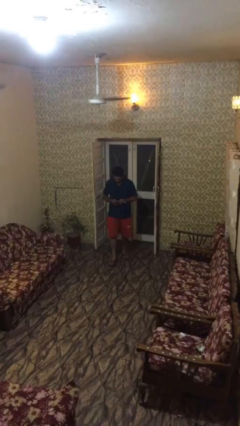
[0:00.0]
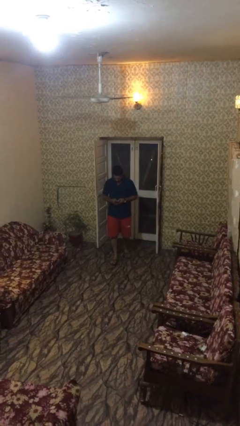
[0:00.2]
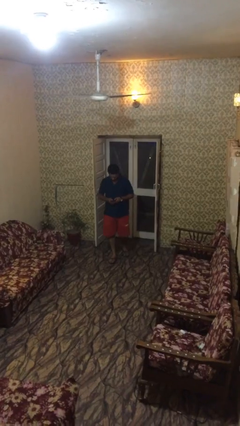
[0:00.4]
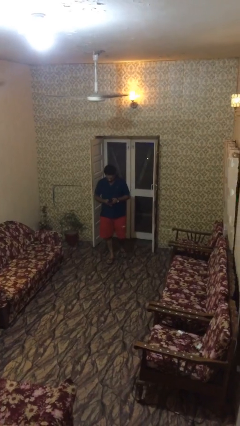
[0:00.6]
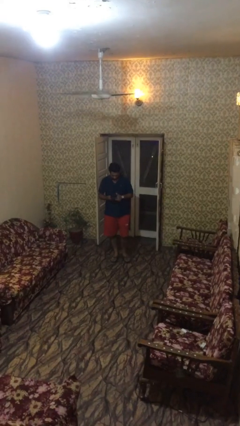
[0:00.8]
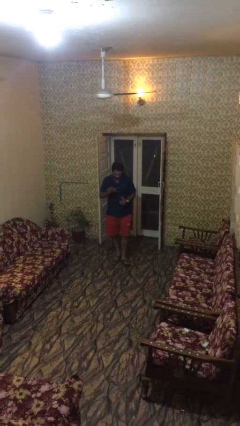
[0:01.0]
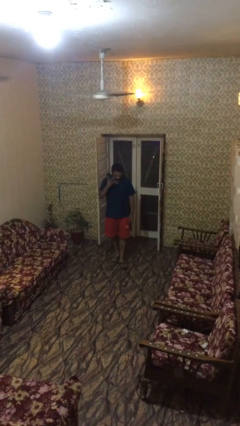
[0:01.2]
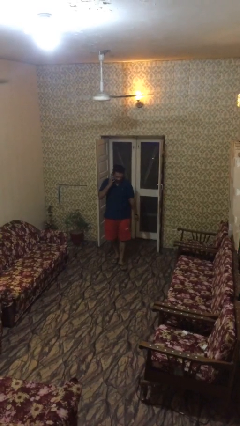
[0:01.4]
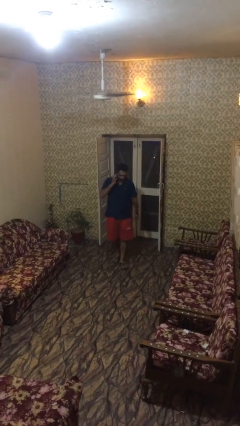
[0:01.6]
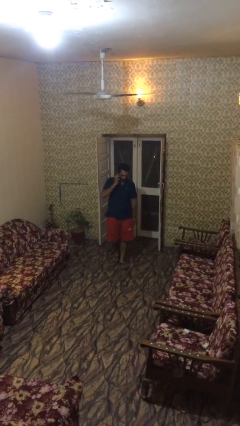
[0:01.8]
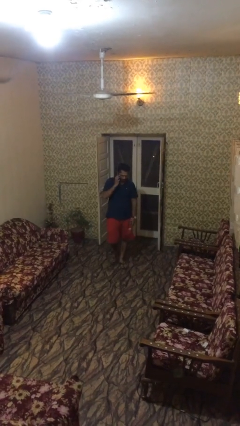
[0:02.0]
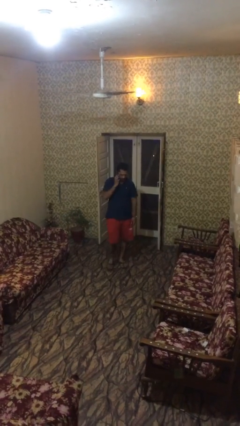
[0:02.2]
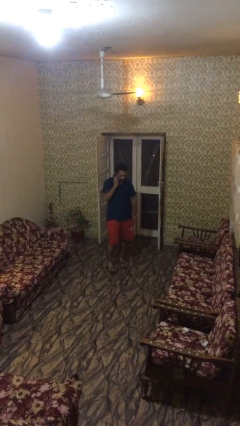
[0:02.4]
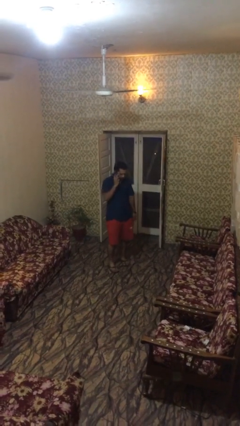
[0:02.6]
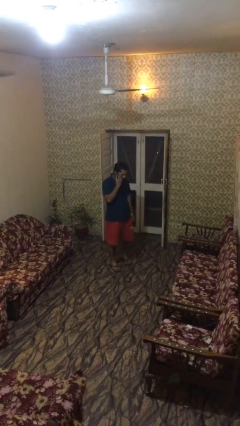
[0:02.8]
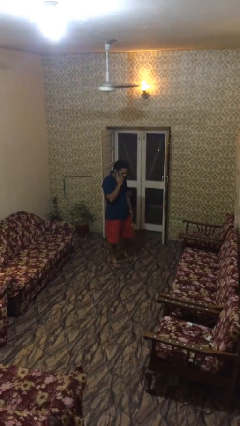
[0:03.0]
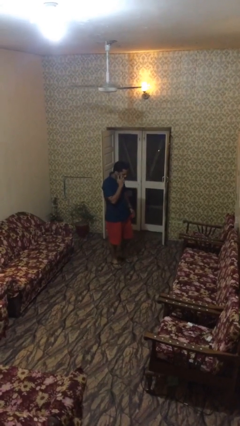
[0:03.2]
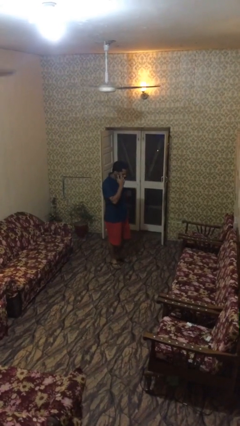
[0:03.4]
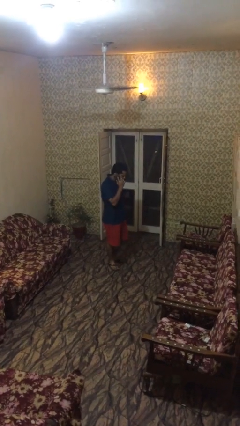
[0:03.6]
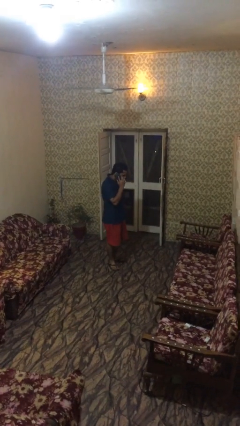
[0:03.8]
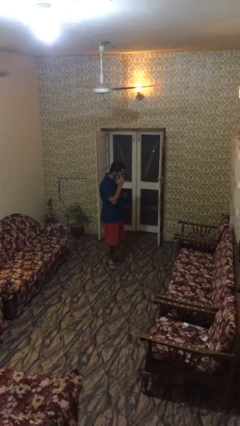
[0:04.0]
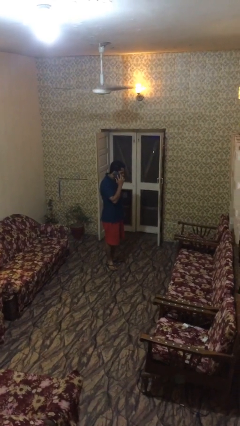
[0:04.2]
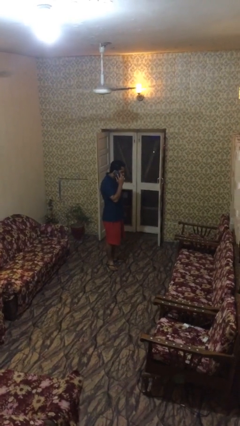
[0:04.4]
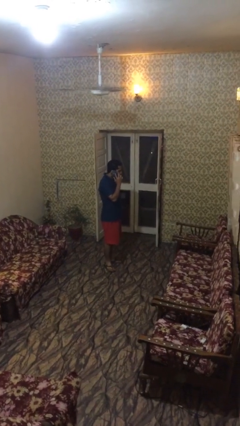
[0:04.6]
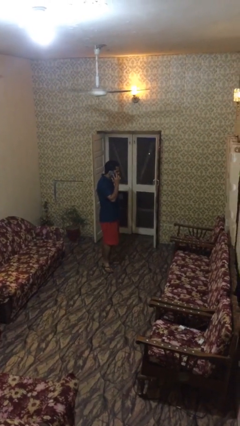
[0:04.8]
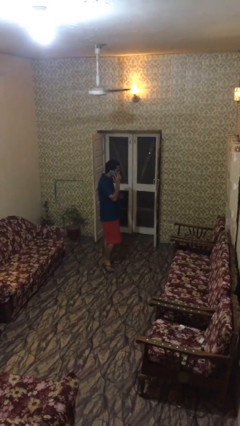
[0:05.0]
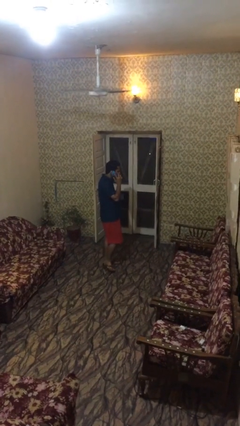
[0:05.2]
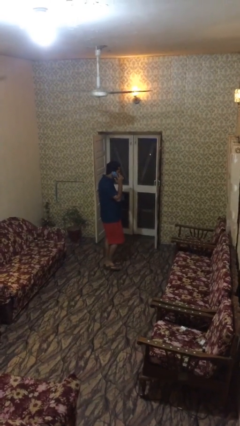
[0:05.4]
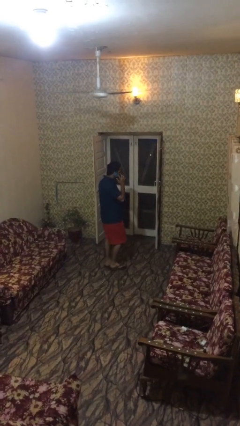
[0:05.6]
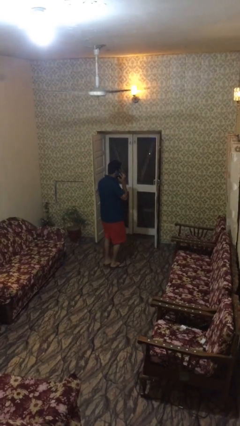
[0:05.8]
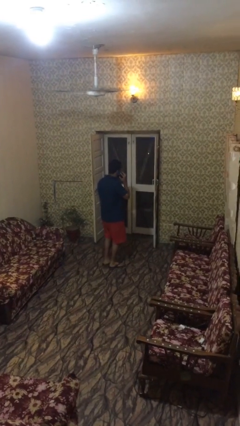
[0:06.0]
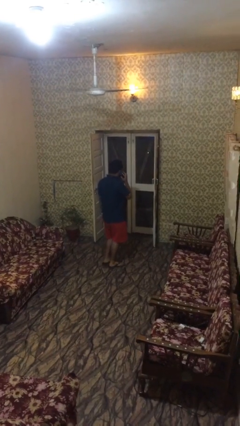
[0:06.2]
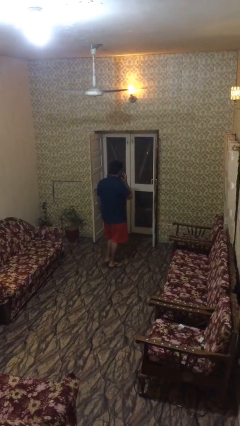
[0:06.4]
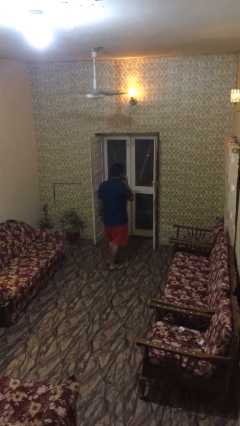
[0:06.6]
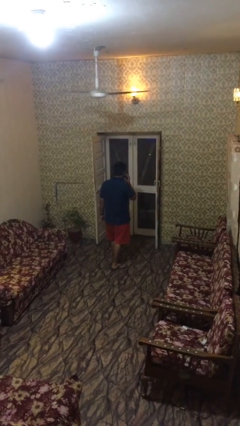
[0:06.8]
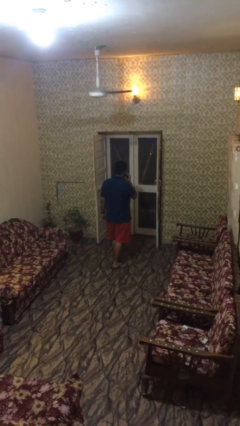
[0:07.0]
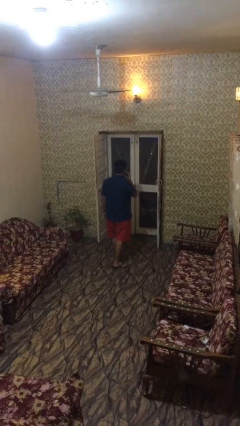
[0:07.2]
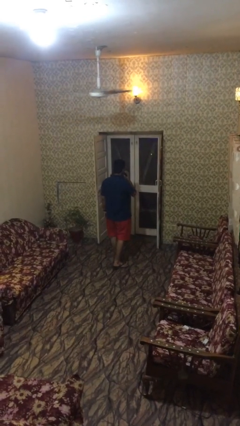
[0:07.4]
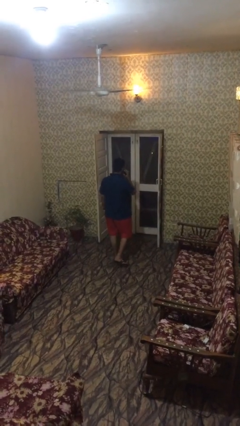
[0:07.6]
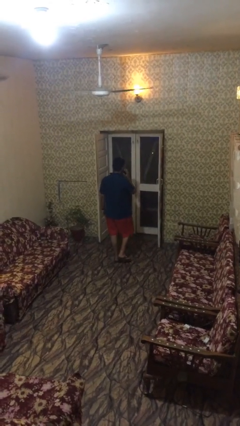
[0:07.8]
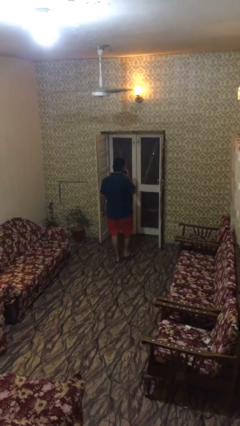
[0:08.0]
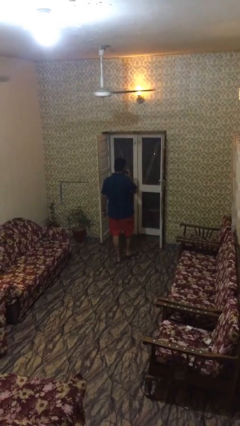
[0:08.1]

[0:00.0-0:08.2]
person talks on phone

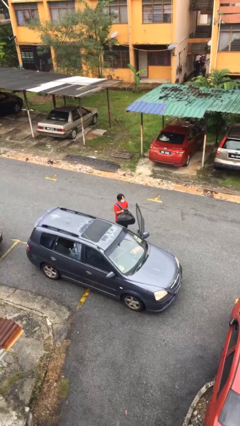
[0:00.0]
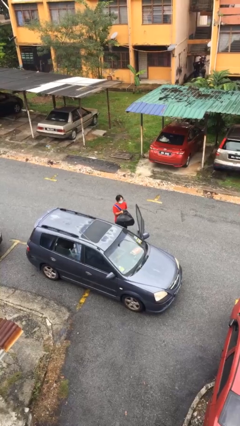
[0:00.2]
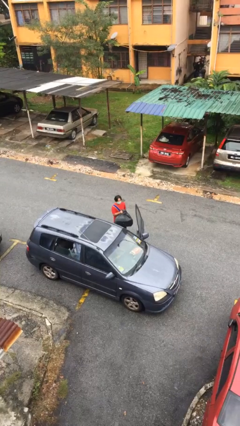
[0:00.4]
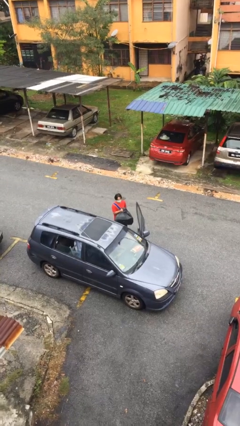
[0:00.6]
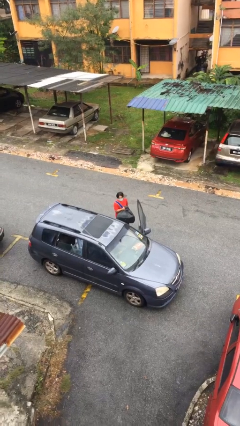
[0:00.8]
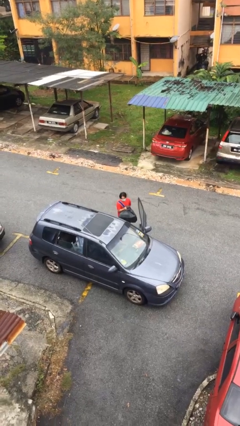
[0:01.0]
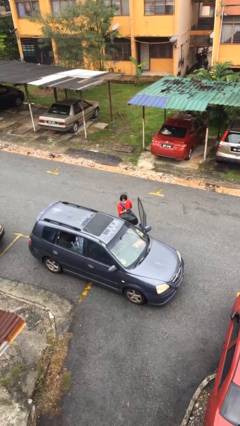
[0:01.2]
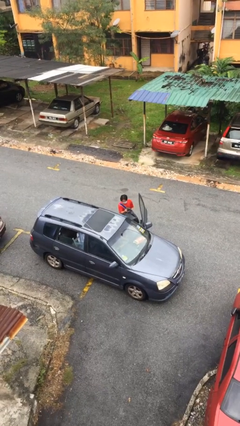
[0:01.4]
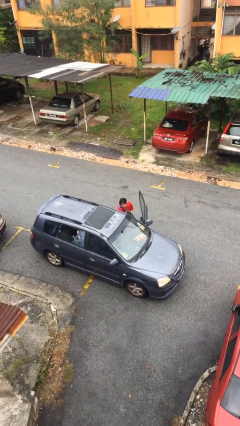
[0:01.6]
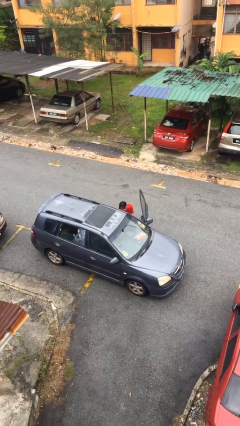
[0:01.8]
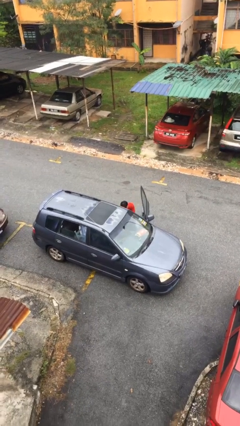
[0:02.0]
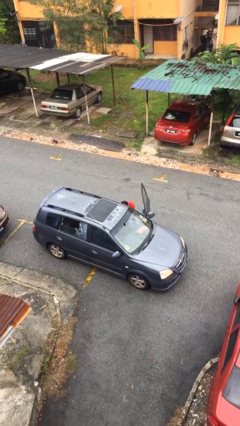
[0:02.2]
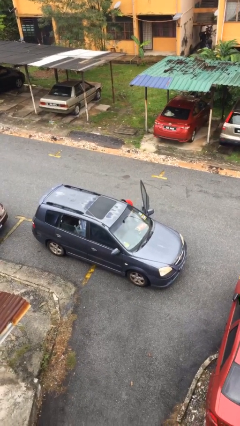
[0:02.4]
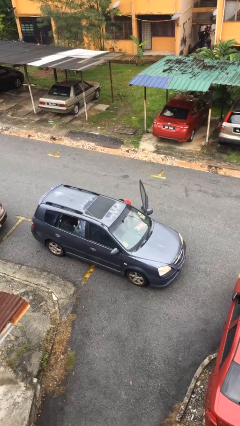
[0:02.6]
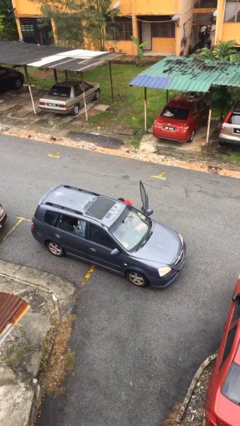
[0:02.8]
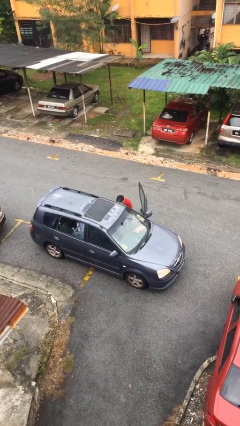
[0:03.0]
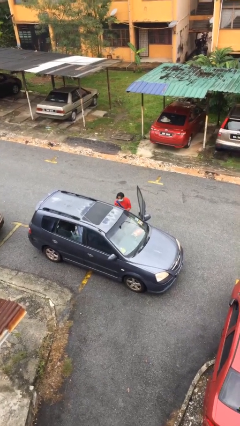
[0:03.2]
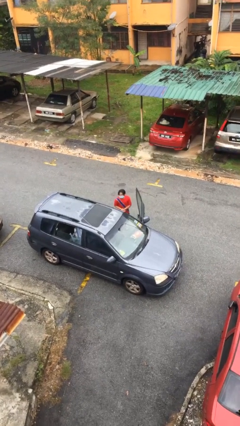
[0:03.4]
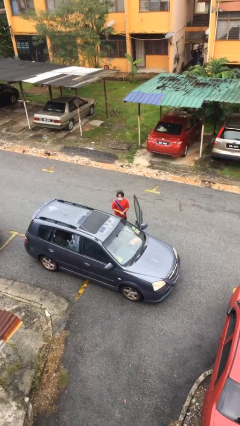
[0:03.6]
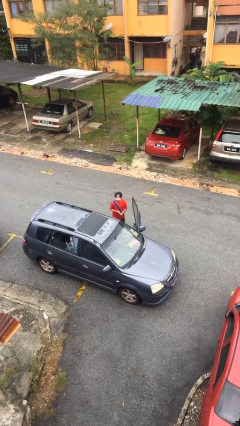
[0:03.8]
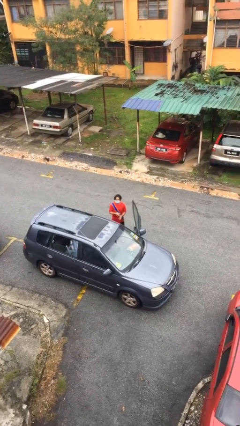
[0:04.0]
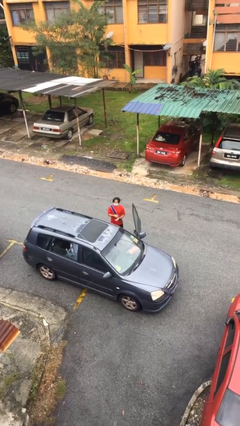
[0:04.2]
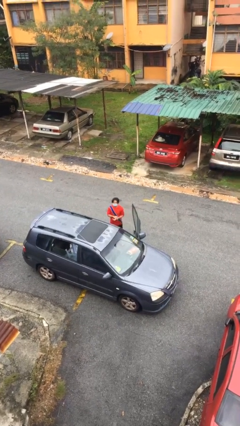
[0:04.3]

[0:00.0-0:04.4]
person loads car

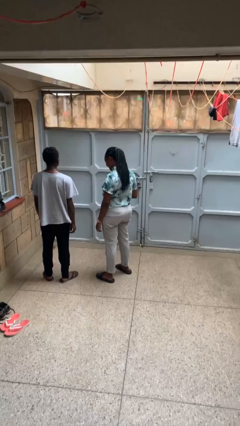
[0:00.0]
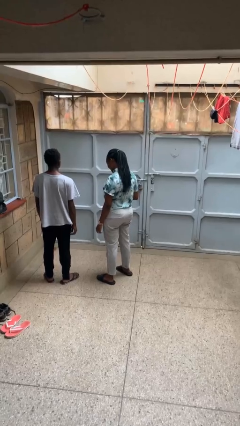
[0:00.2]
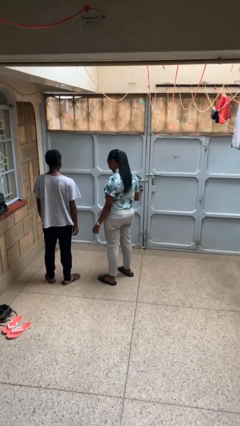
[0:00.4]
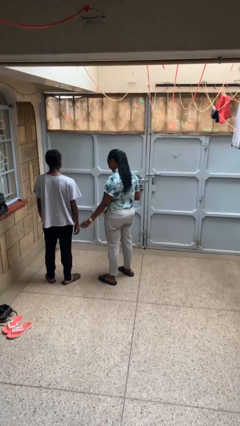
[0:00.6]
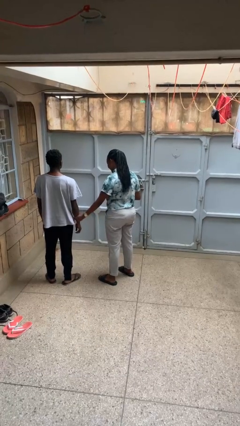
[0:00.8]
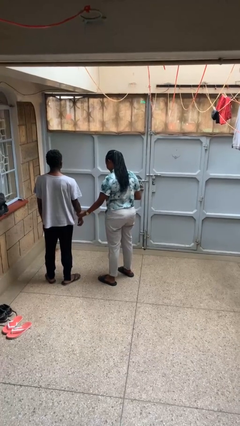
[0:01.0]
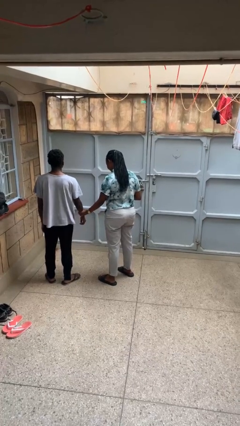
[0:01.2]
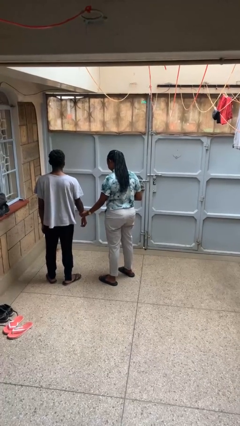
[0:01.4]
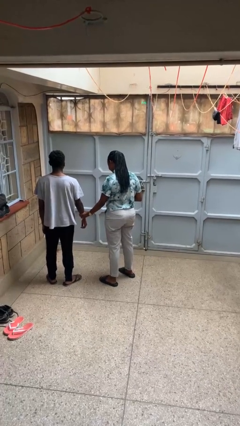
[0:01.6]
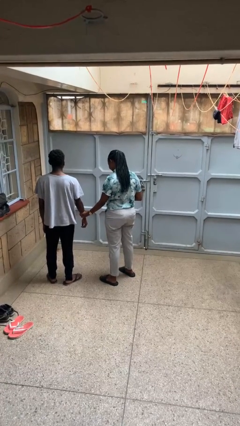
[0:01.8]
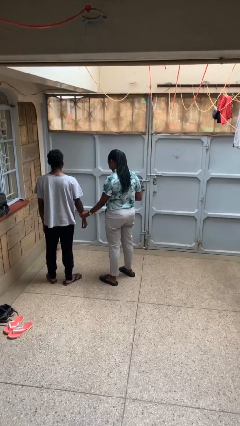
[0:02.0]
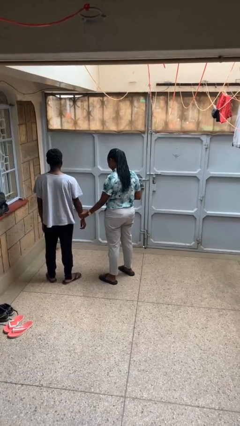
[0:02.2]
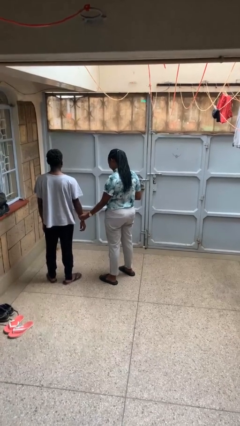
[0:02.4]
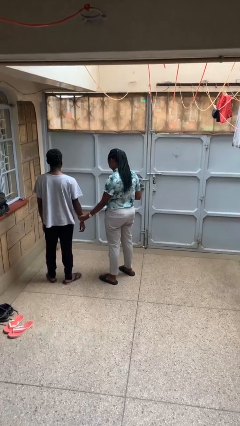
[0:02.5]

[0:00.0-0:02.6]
person grabs person by forearm

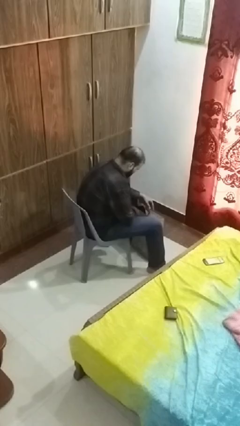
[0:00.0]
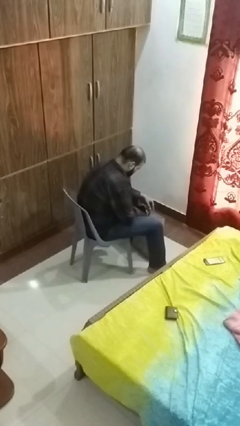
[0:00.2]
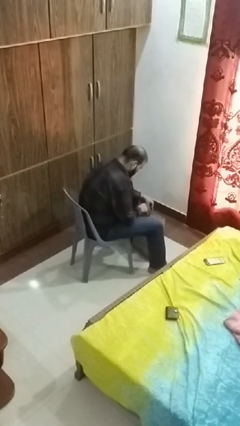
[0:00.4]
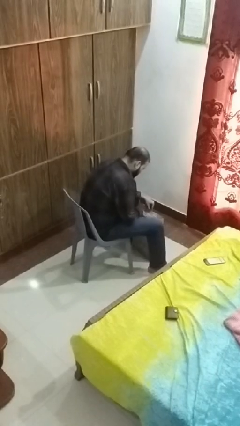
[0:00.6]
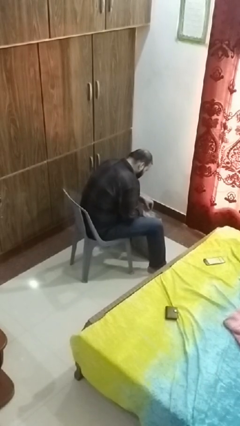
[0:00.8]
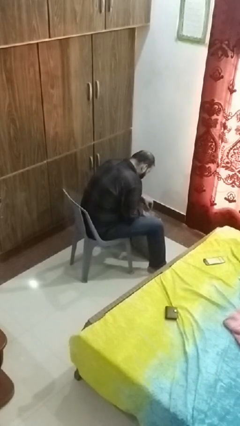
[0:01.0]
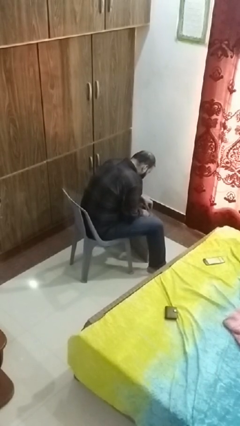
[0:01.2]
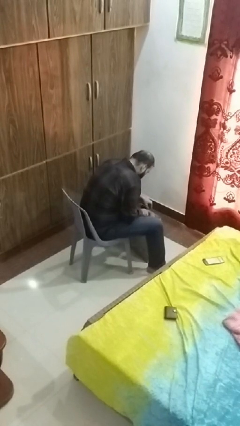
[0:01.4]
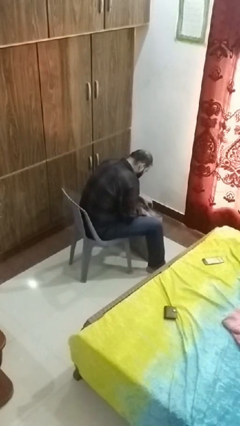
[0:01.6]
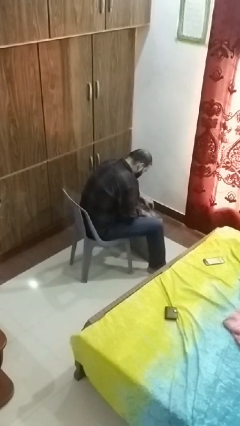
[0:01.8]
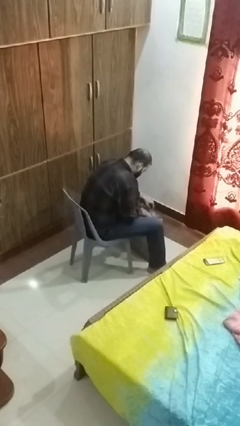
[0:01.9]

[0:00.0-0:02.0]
person searches in bag

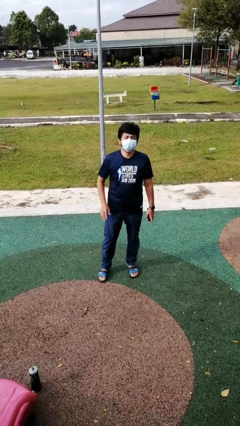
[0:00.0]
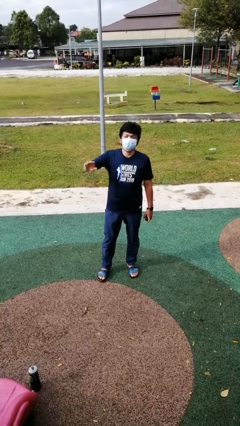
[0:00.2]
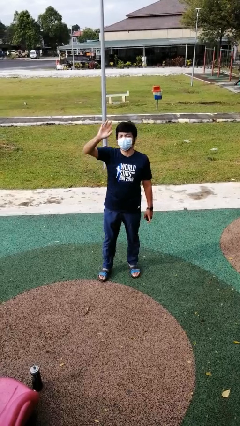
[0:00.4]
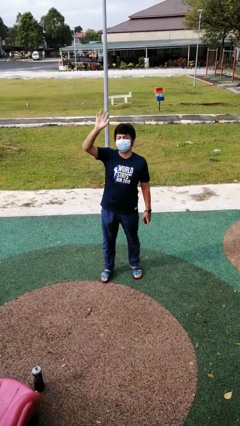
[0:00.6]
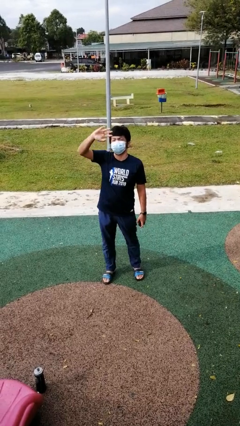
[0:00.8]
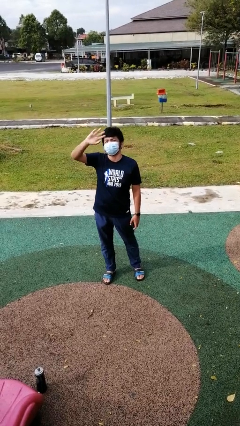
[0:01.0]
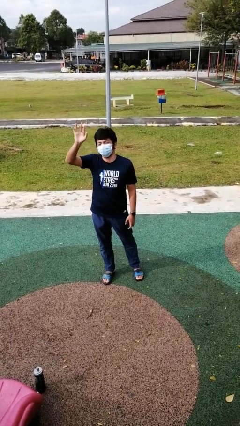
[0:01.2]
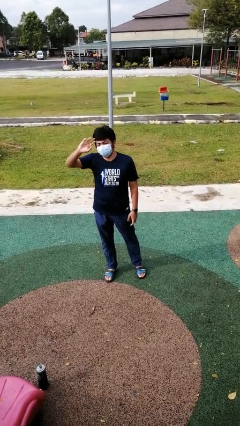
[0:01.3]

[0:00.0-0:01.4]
person waves at person
